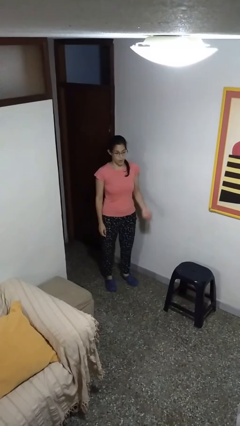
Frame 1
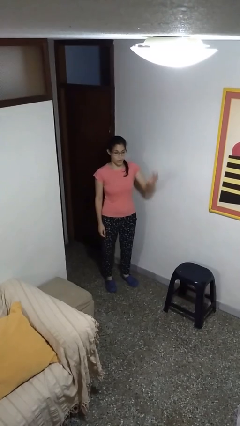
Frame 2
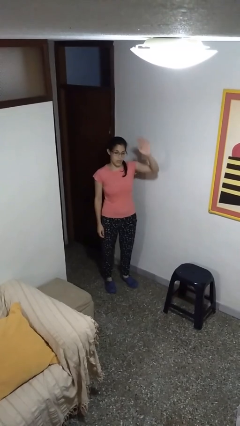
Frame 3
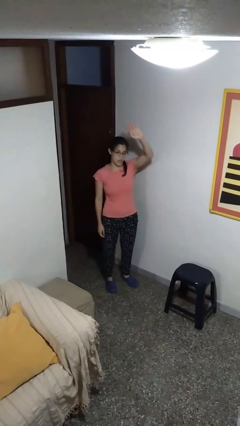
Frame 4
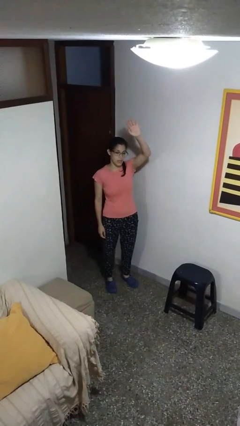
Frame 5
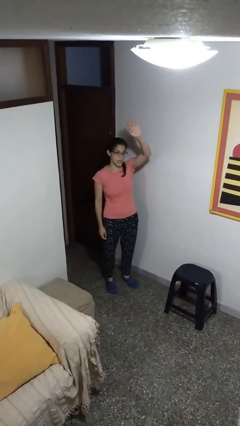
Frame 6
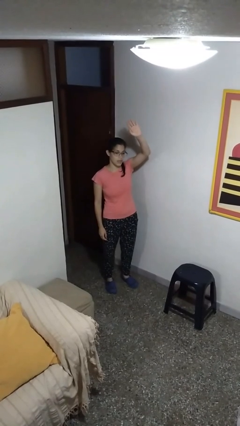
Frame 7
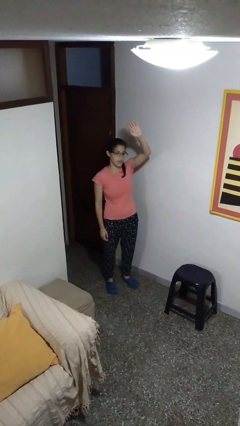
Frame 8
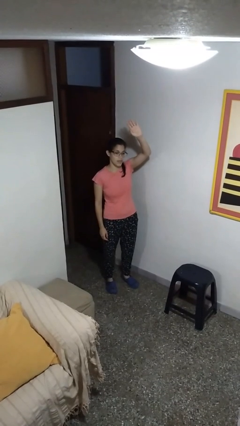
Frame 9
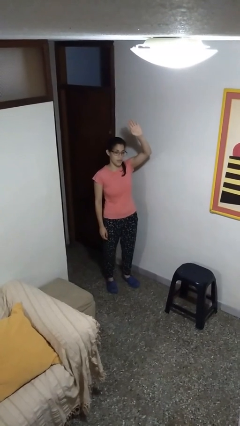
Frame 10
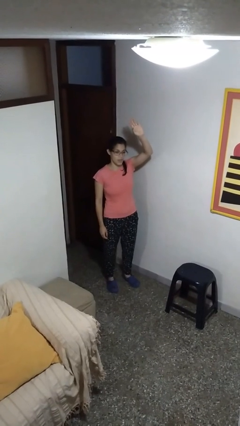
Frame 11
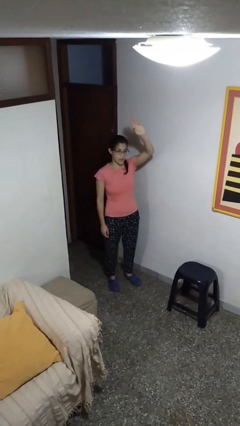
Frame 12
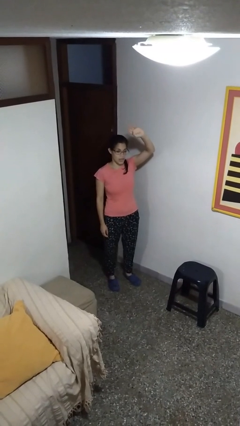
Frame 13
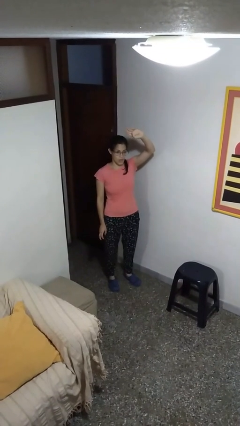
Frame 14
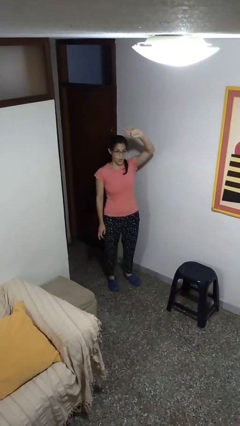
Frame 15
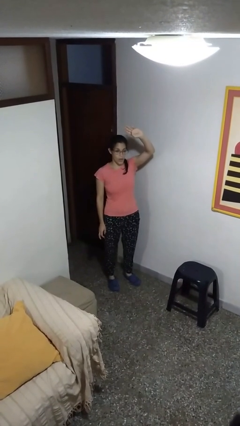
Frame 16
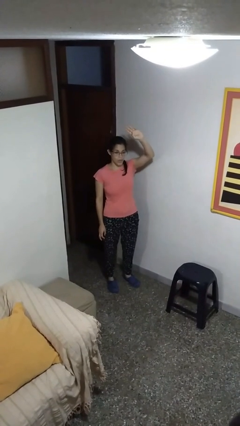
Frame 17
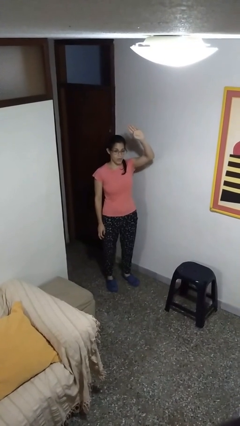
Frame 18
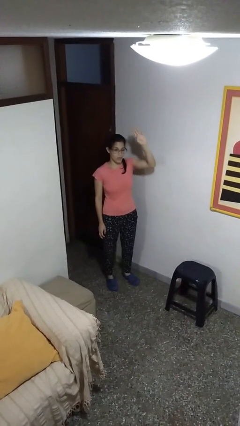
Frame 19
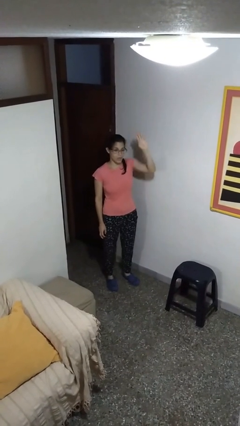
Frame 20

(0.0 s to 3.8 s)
person gestures raise hand

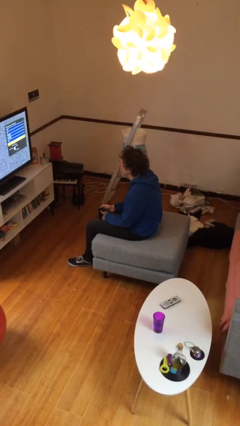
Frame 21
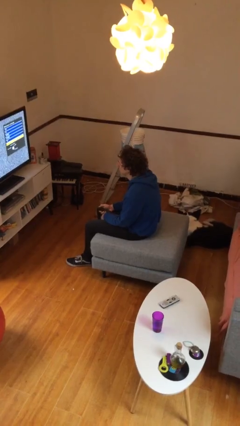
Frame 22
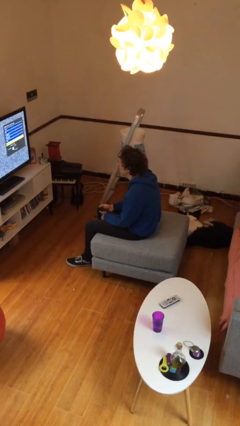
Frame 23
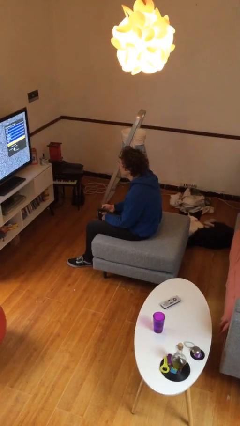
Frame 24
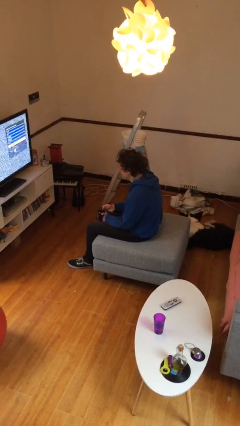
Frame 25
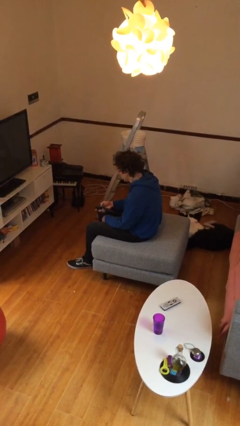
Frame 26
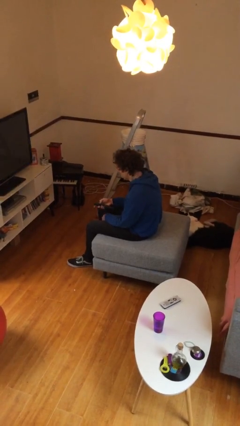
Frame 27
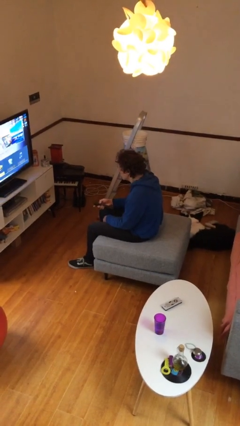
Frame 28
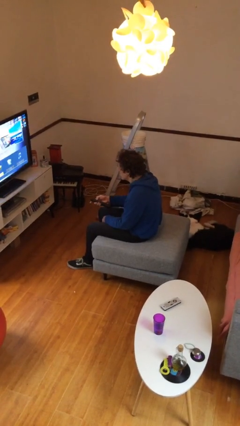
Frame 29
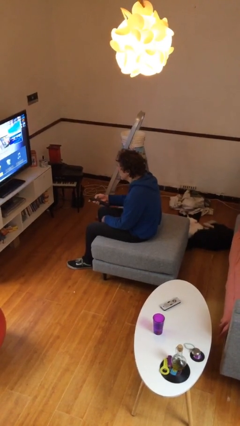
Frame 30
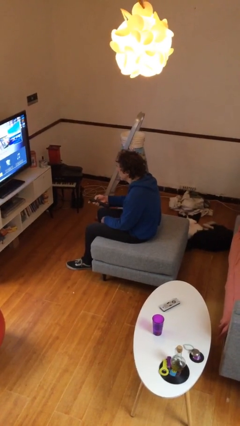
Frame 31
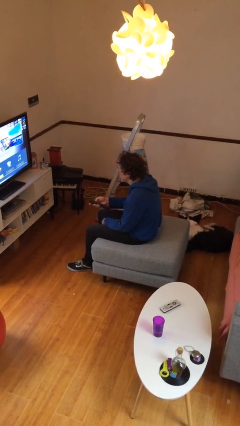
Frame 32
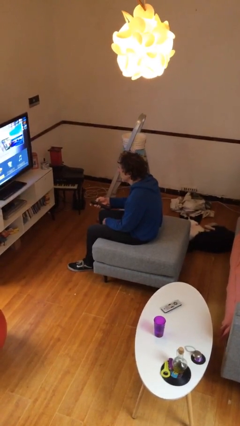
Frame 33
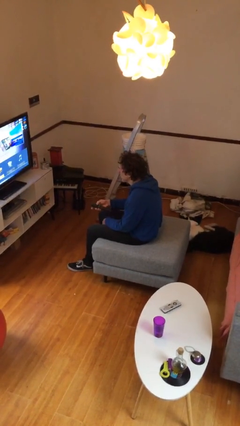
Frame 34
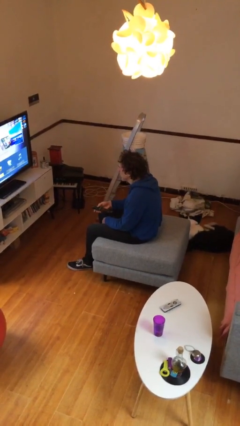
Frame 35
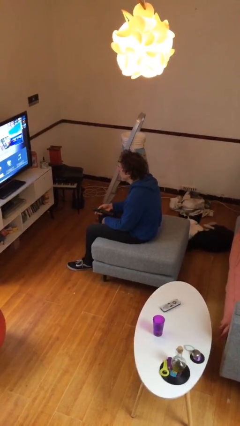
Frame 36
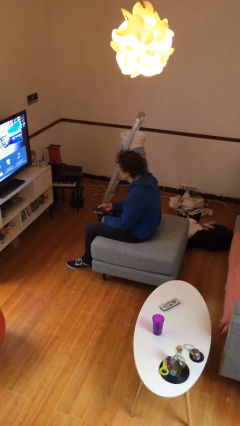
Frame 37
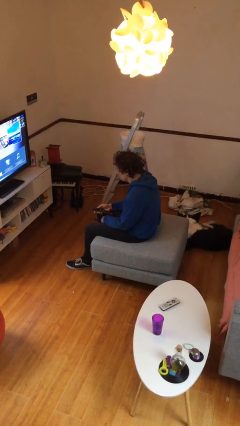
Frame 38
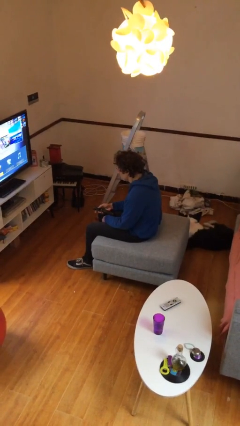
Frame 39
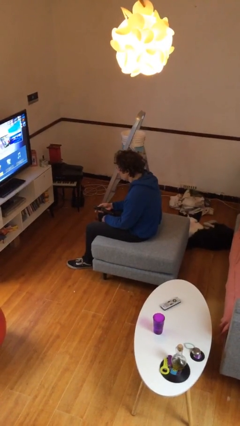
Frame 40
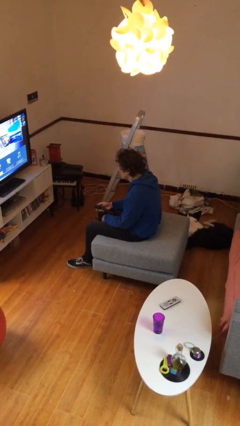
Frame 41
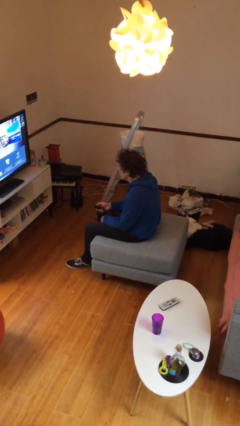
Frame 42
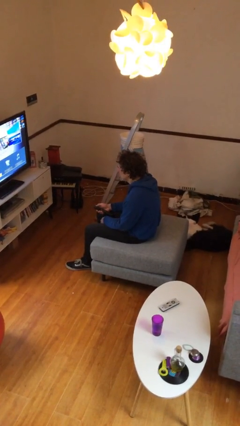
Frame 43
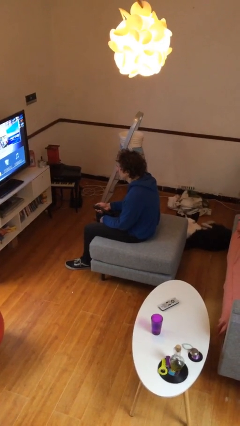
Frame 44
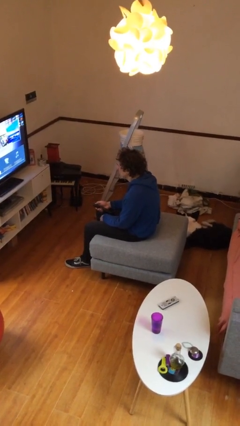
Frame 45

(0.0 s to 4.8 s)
person uses television remote

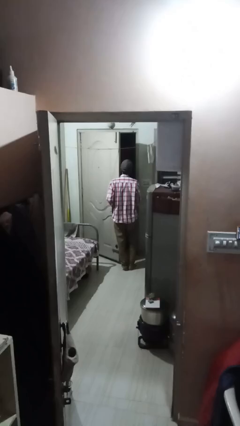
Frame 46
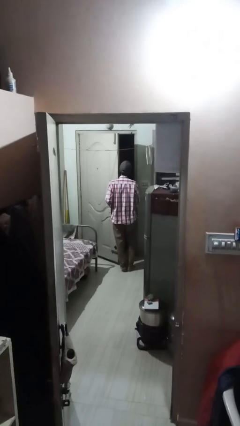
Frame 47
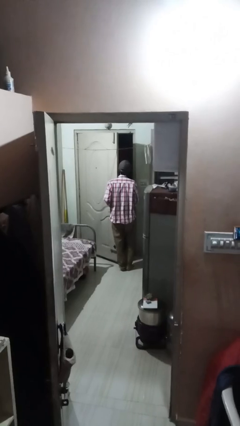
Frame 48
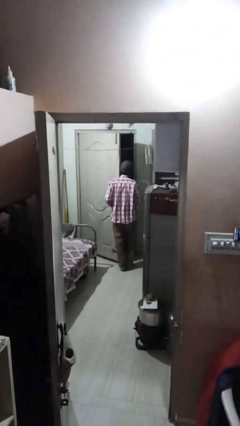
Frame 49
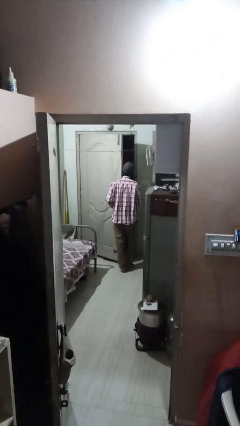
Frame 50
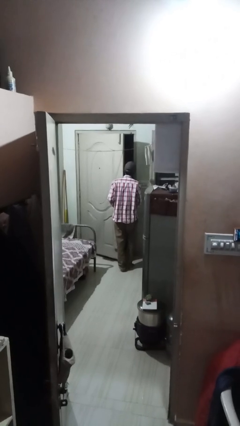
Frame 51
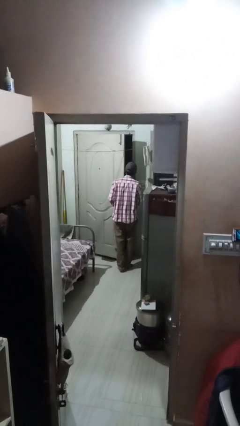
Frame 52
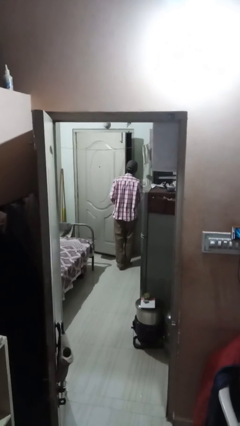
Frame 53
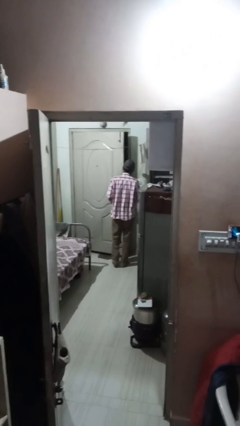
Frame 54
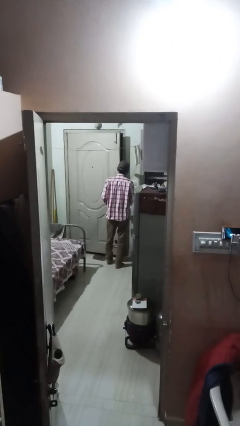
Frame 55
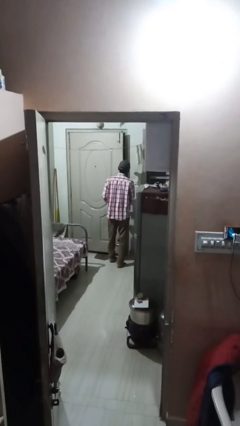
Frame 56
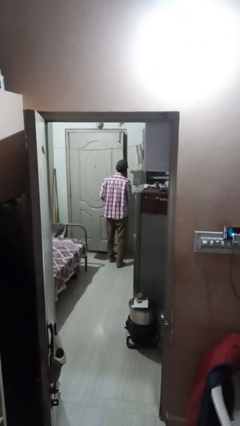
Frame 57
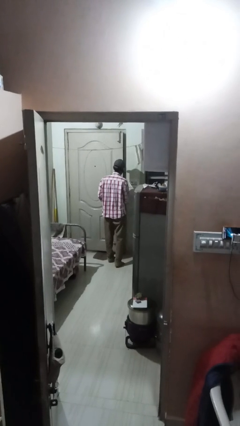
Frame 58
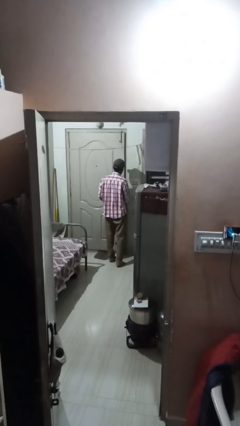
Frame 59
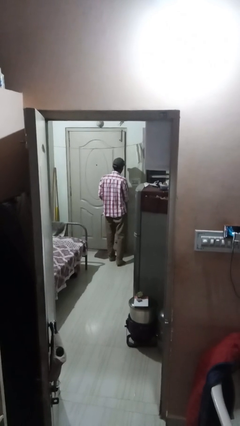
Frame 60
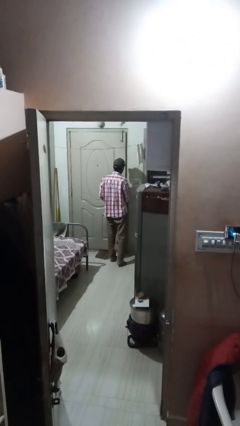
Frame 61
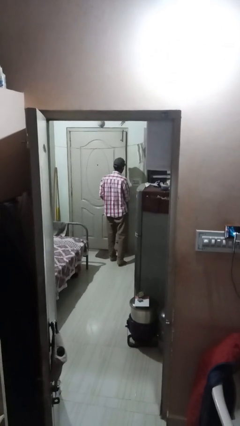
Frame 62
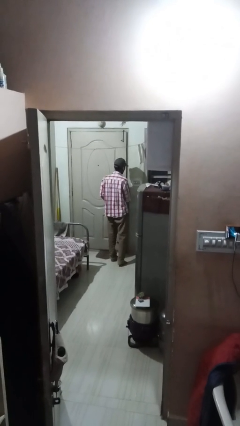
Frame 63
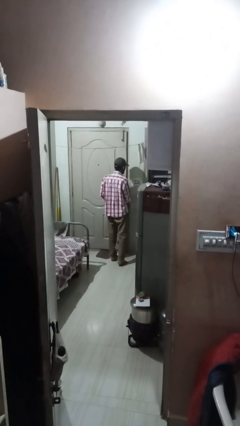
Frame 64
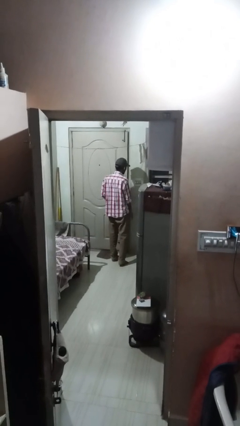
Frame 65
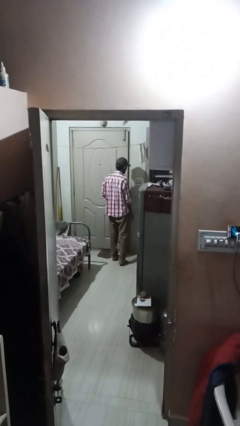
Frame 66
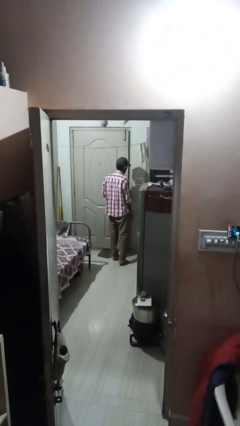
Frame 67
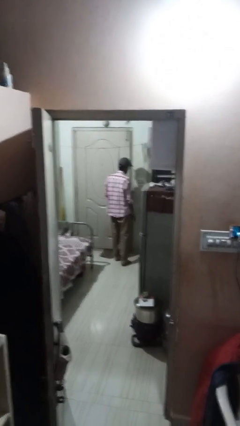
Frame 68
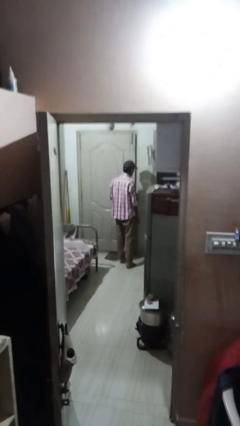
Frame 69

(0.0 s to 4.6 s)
person closes facility door

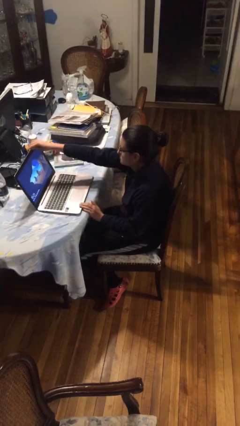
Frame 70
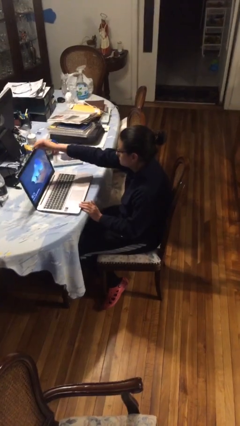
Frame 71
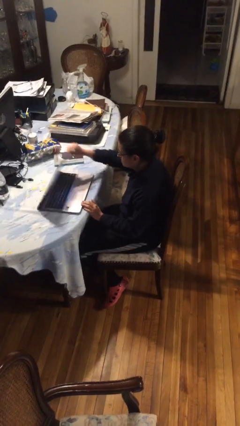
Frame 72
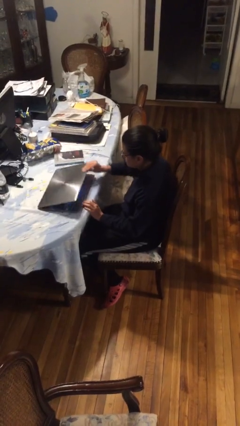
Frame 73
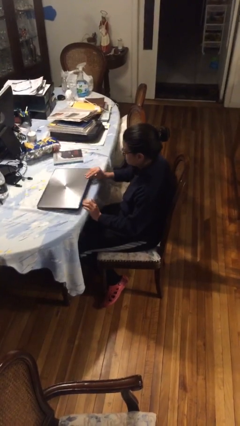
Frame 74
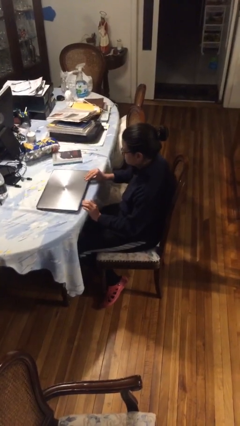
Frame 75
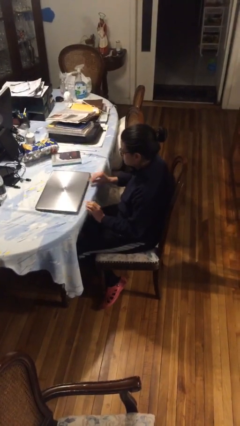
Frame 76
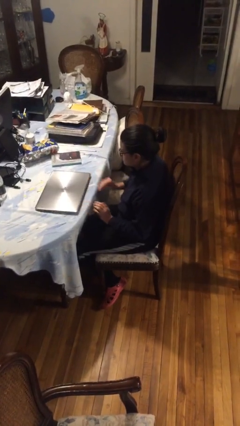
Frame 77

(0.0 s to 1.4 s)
person closes laptop

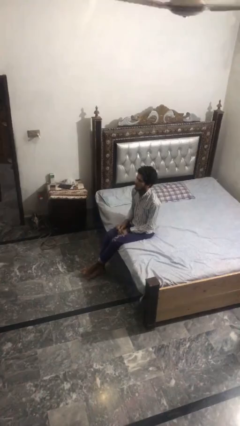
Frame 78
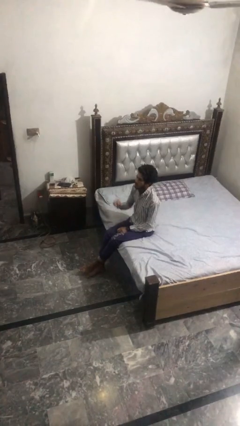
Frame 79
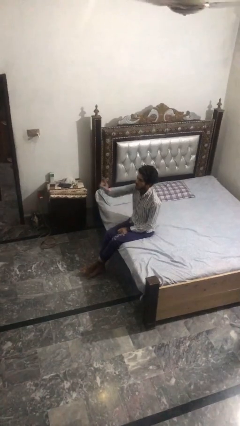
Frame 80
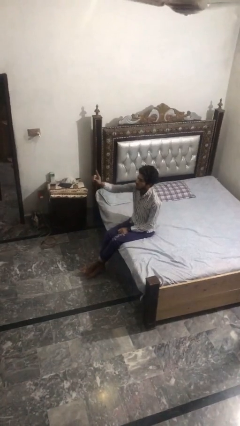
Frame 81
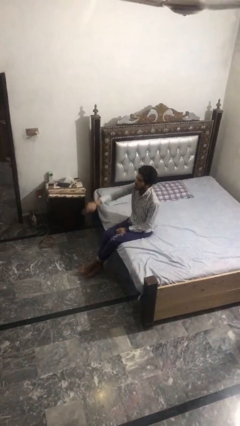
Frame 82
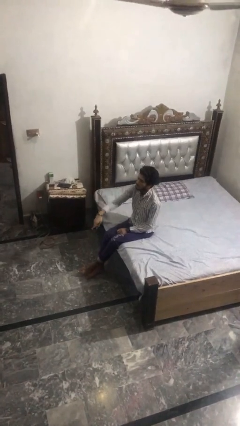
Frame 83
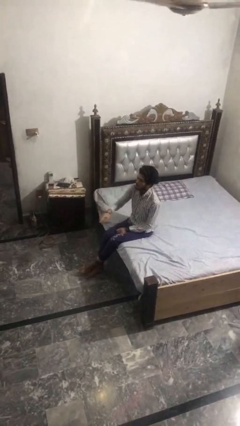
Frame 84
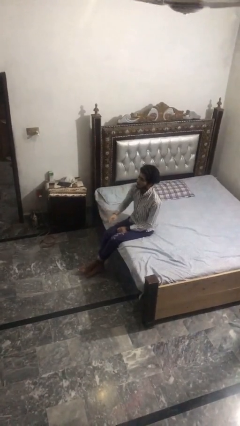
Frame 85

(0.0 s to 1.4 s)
person gestures swipe down

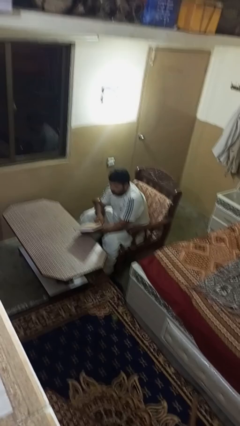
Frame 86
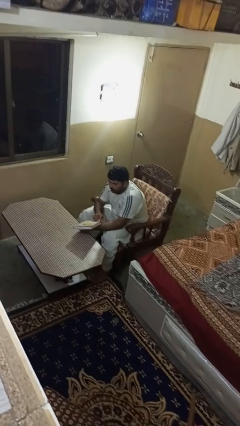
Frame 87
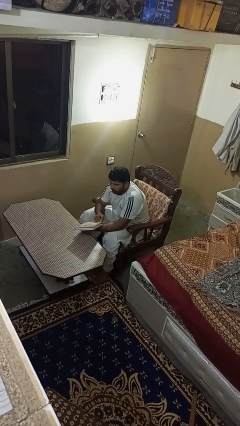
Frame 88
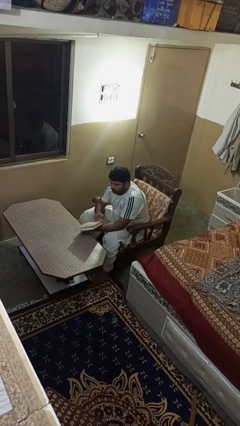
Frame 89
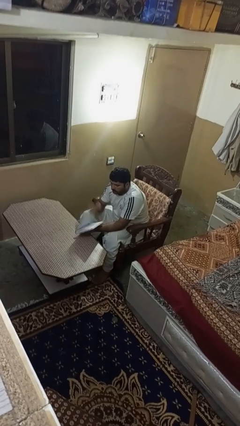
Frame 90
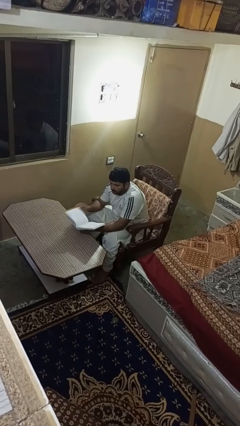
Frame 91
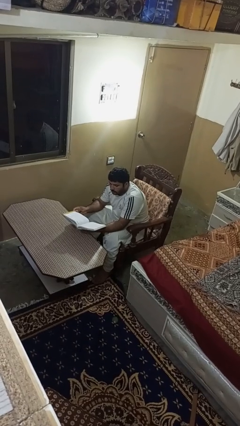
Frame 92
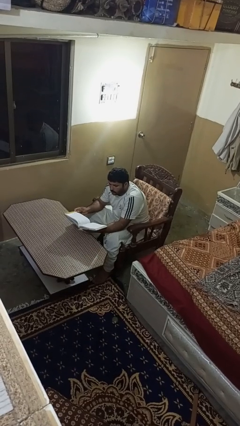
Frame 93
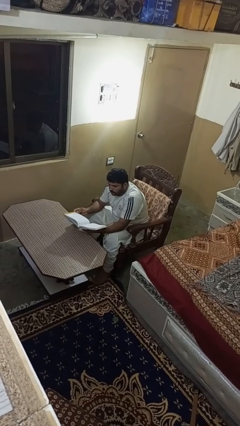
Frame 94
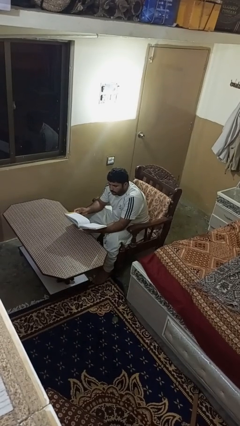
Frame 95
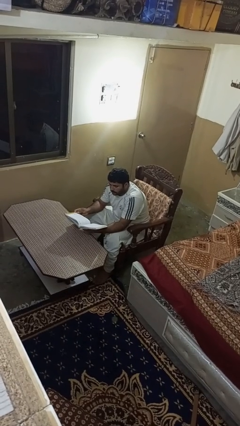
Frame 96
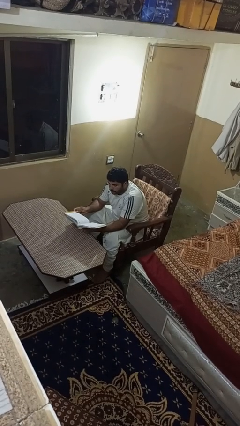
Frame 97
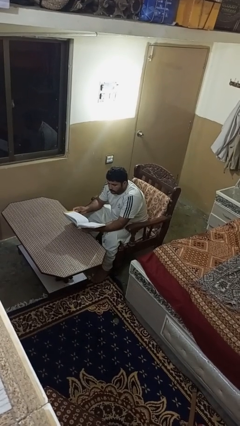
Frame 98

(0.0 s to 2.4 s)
person reads book
